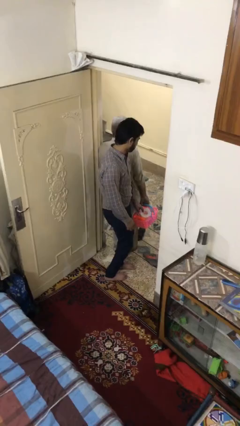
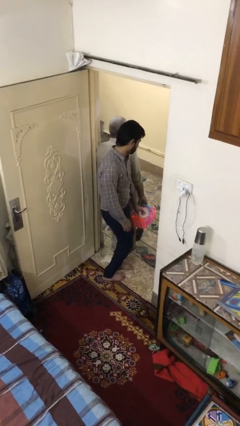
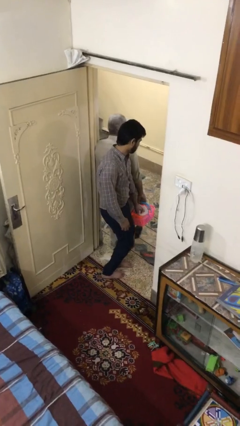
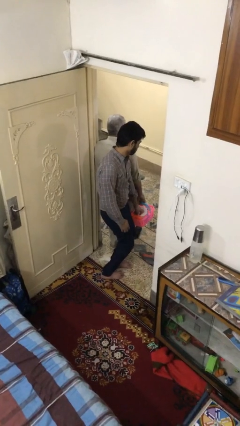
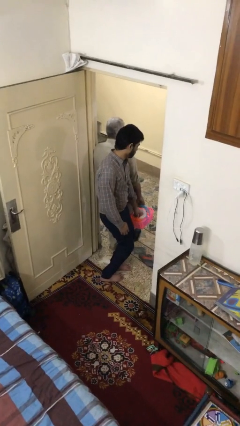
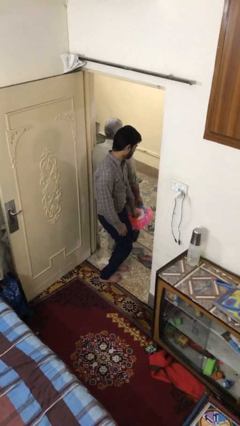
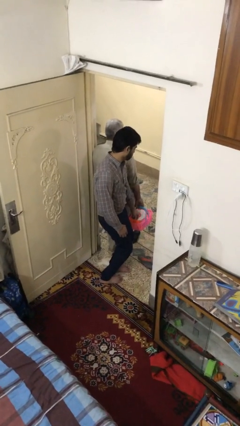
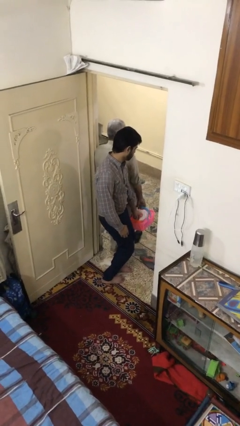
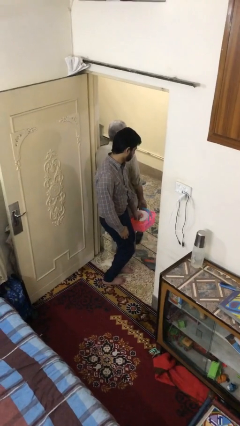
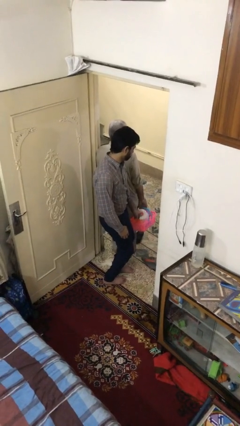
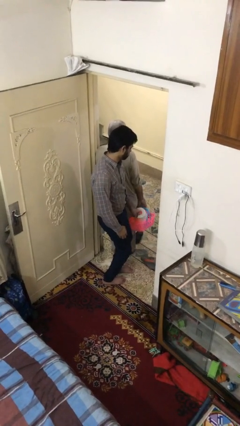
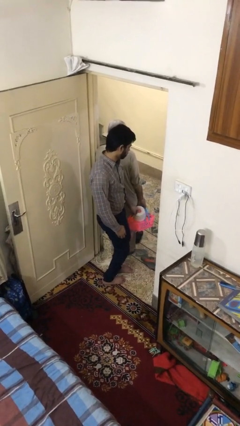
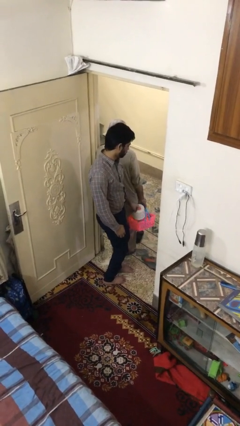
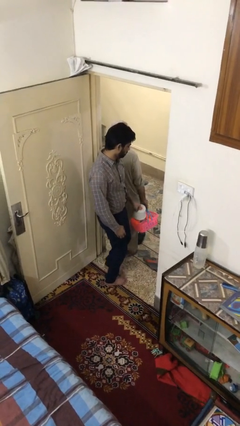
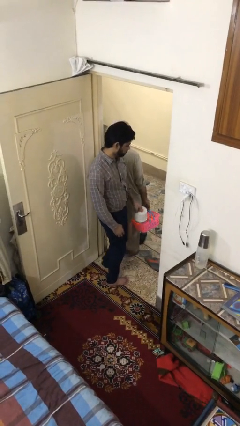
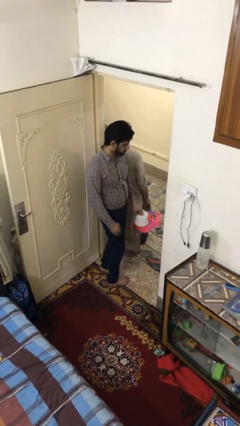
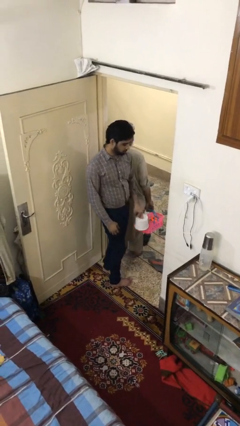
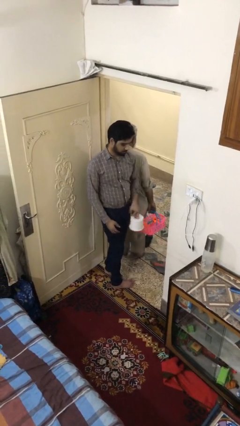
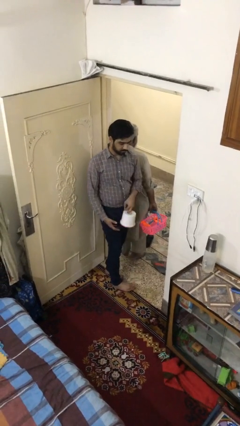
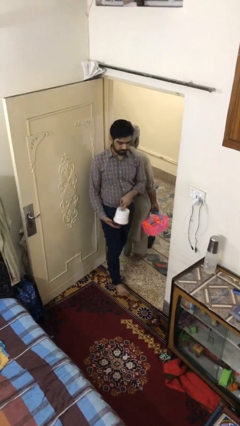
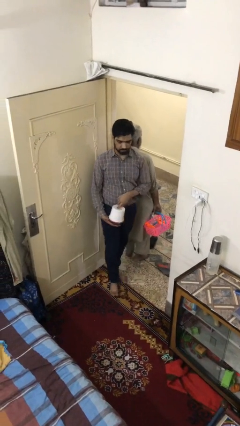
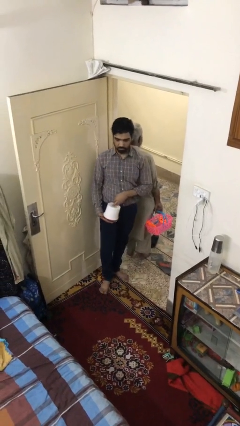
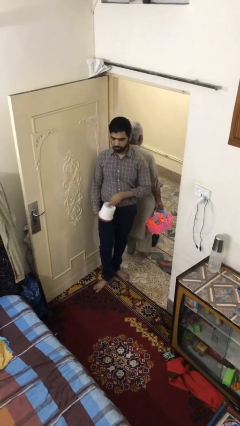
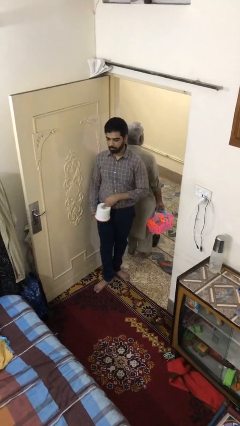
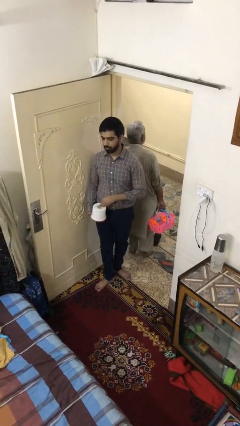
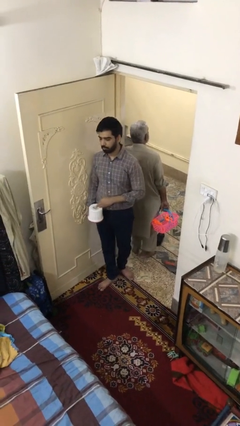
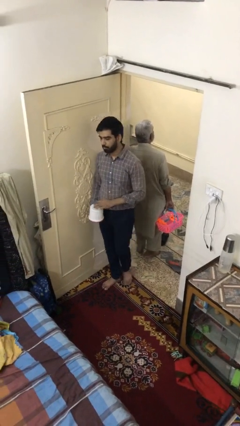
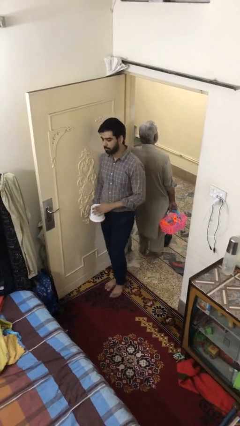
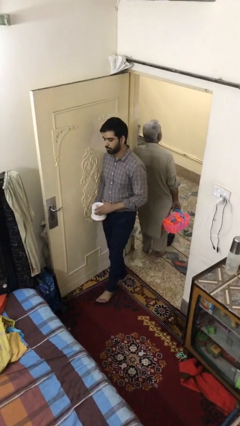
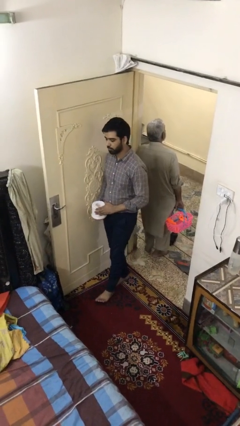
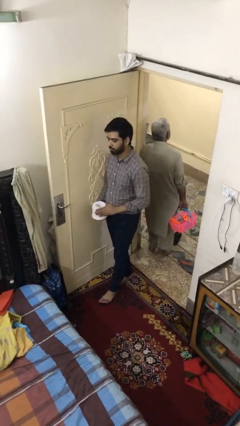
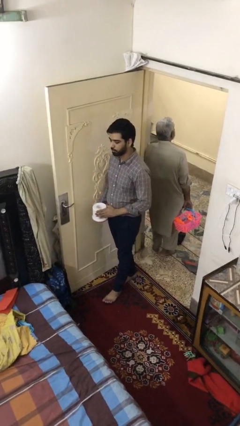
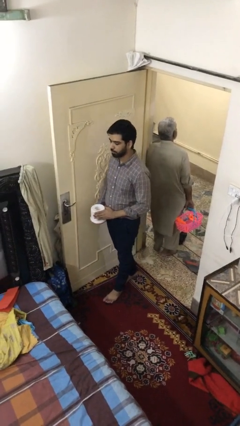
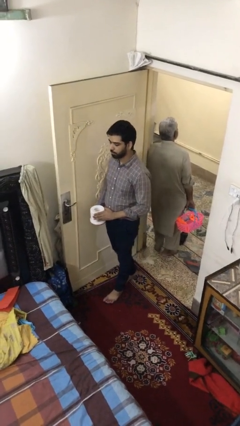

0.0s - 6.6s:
person steals object from person

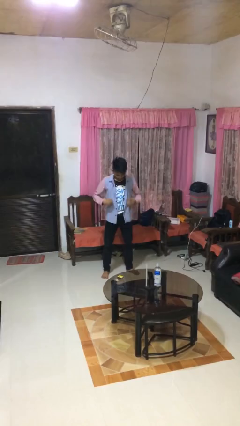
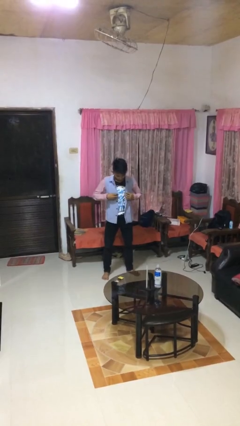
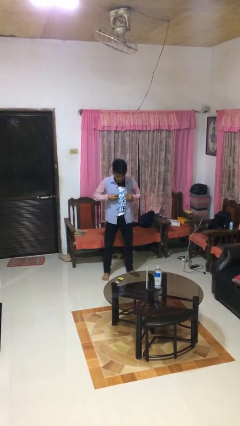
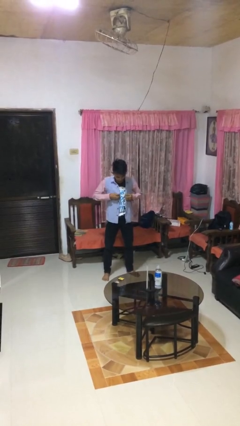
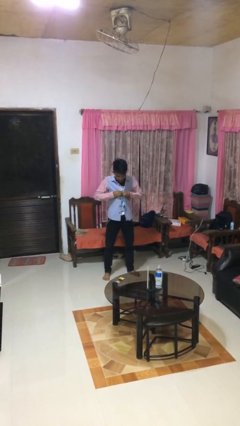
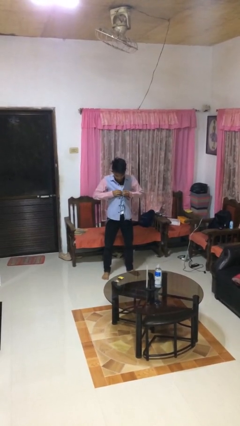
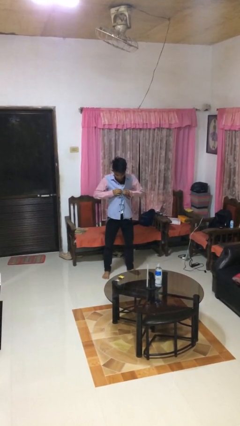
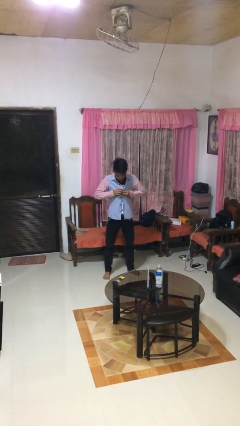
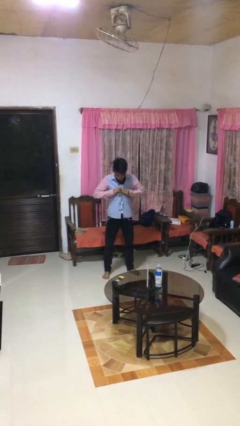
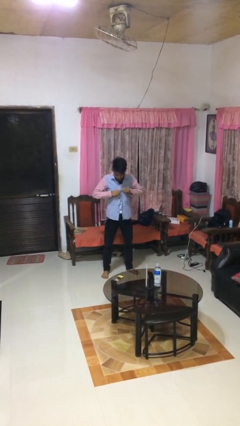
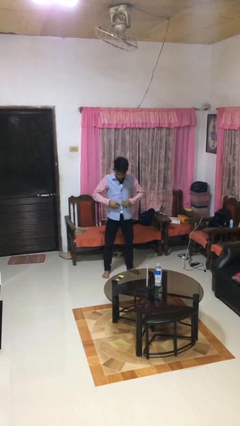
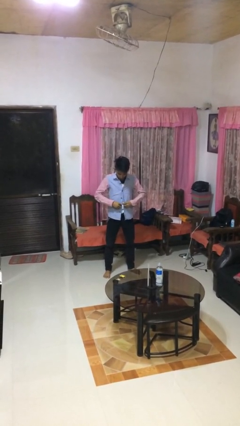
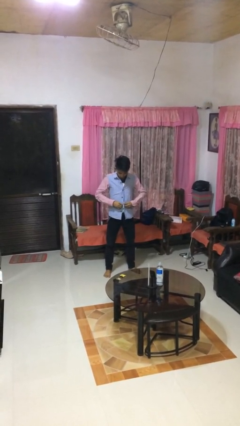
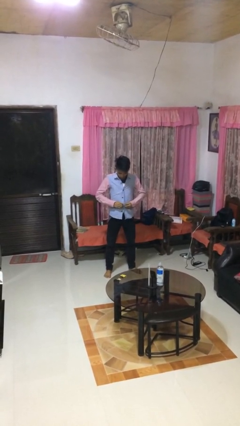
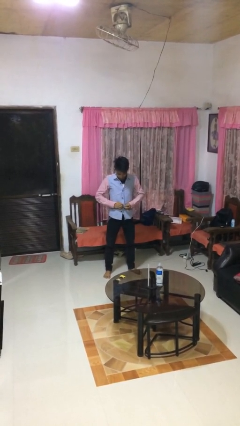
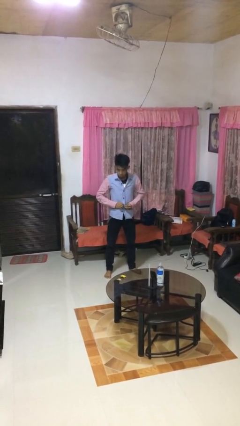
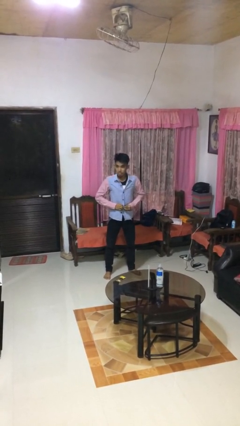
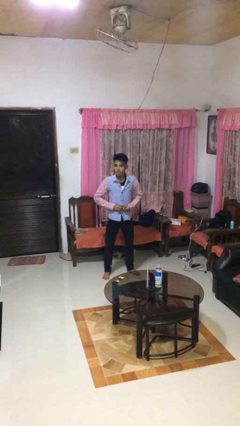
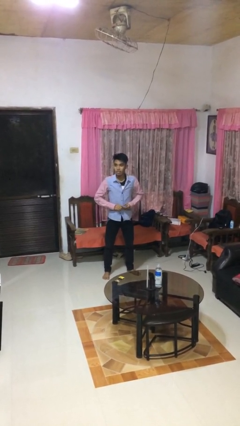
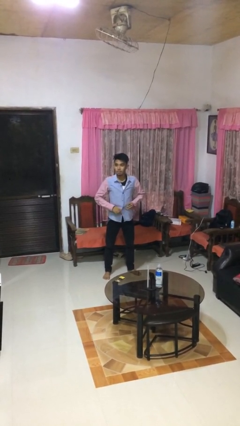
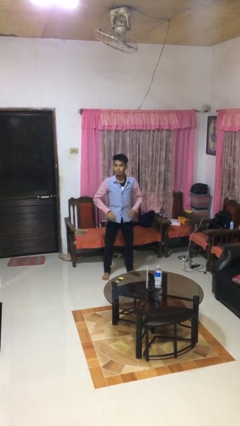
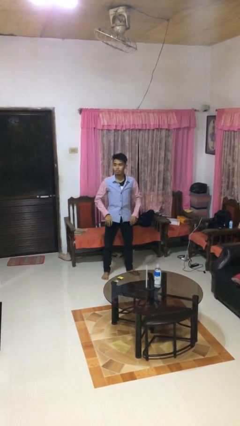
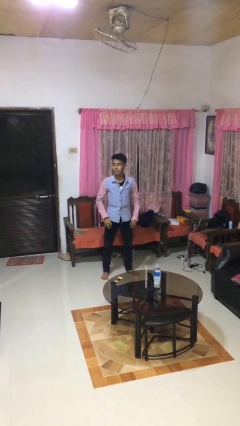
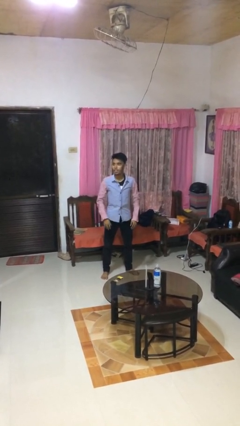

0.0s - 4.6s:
person buttons shirt

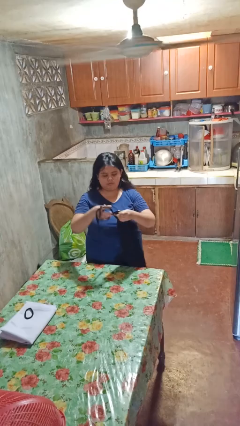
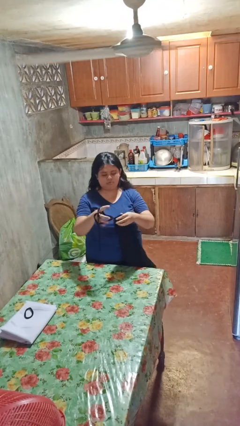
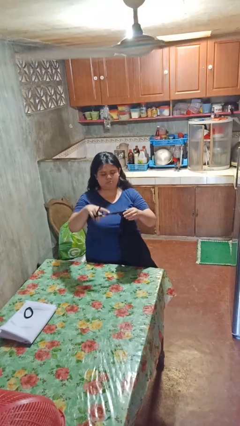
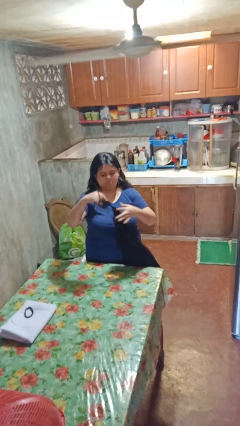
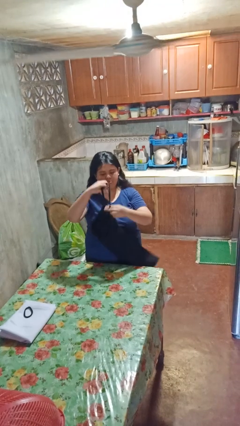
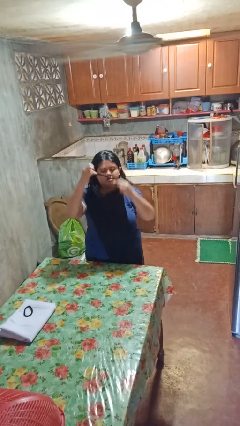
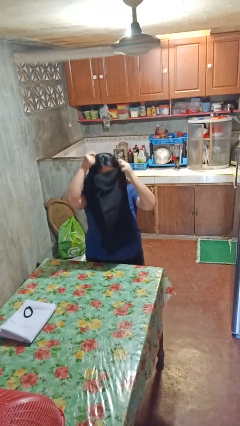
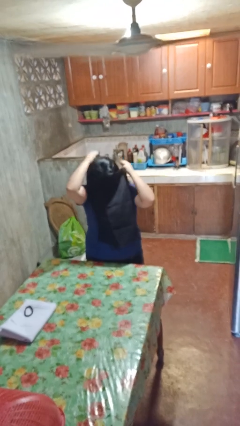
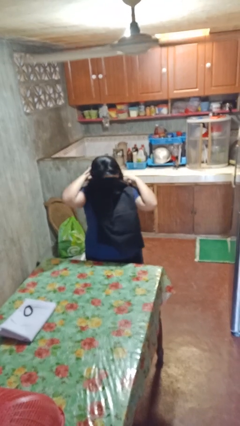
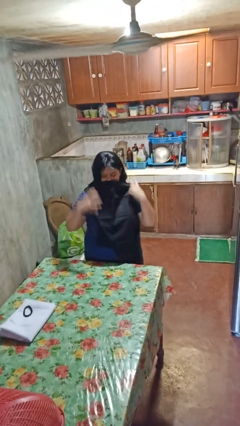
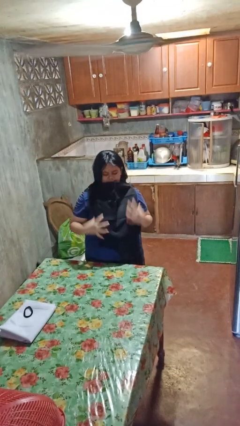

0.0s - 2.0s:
person puts on apron

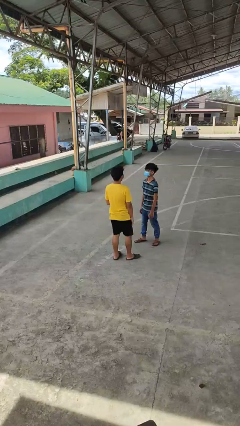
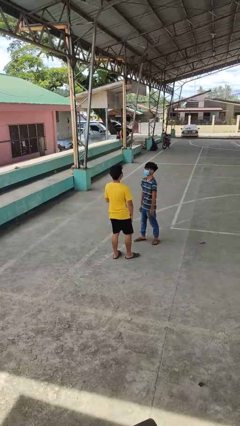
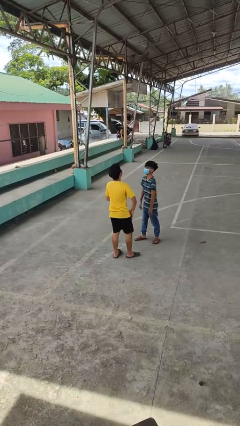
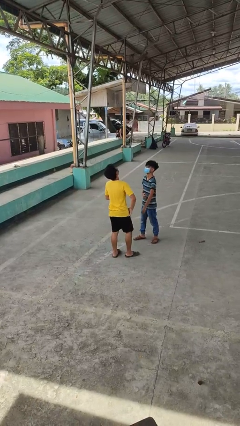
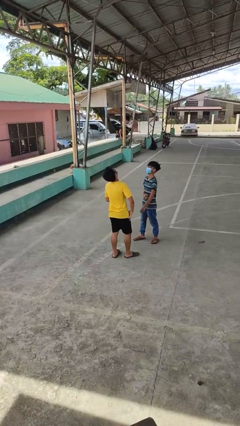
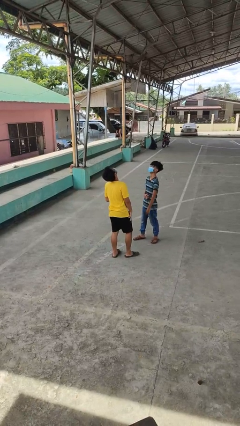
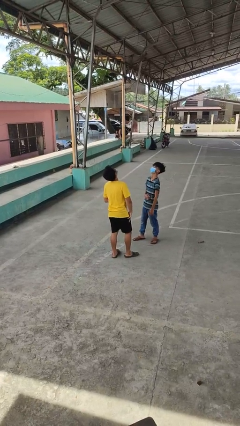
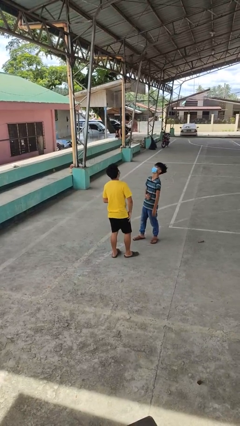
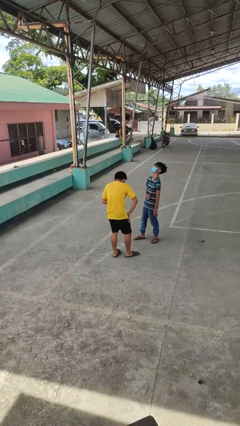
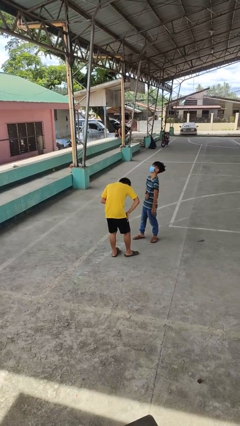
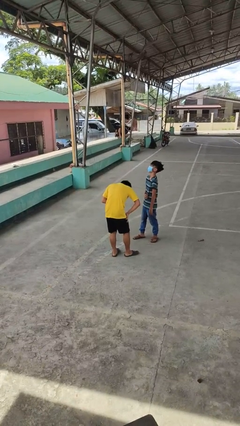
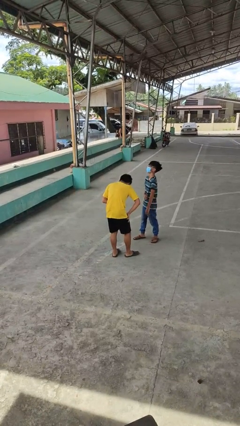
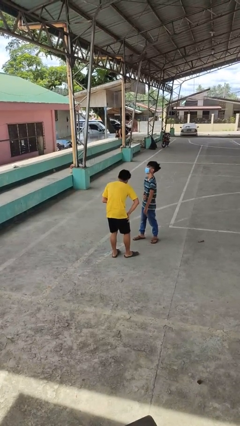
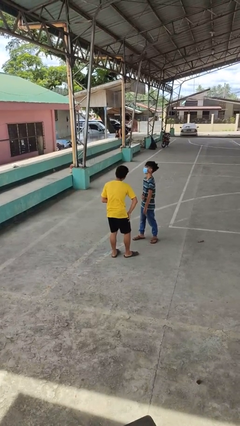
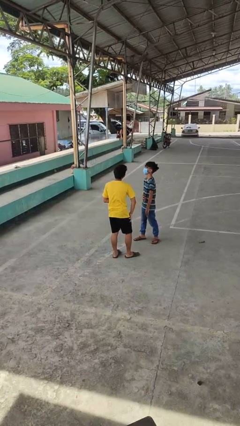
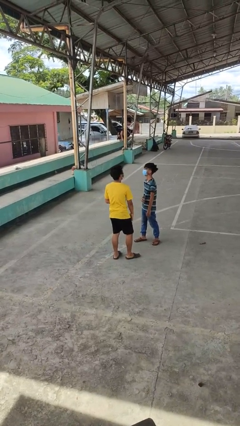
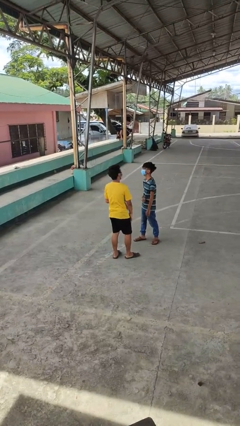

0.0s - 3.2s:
person laughs with person

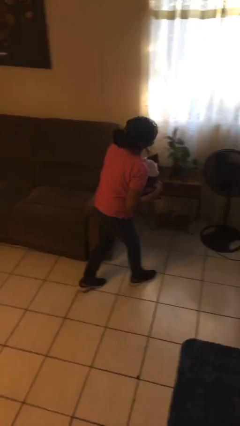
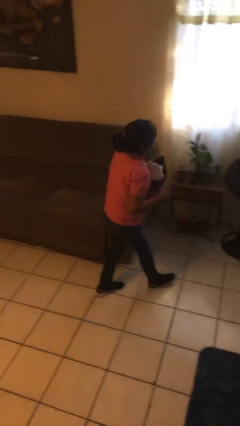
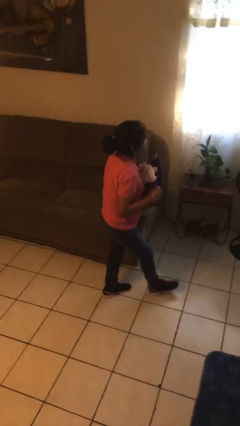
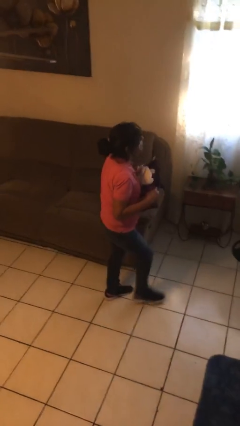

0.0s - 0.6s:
person picks up object from floor

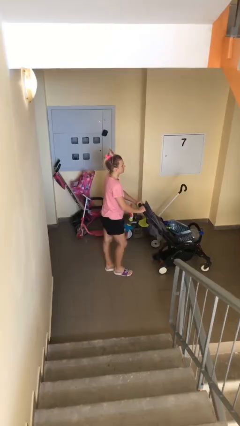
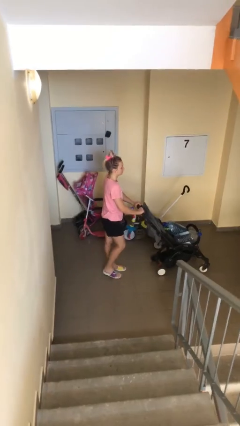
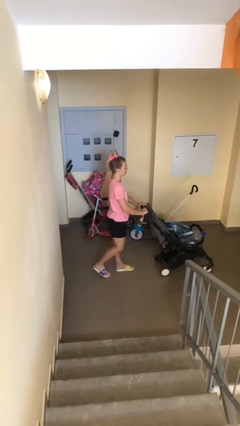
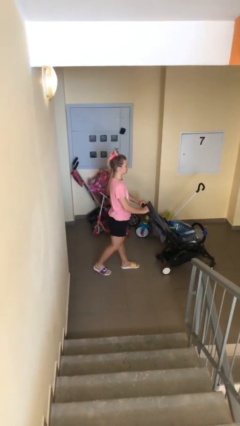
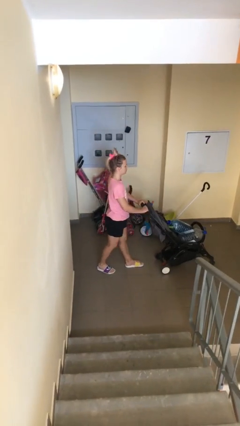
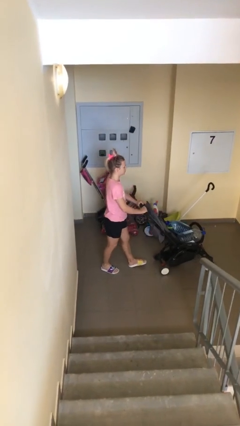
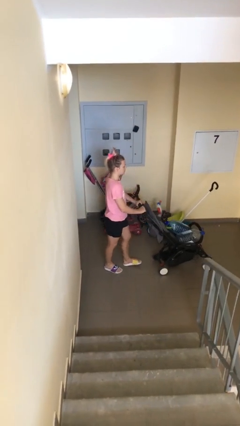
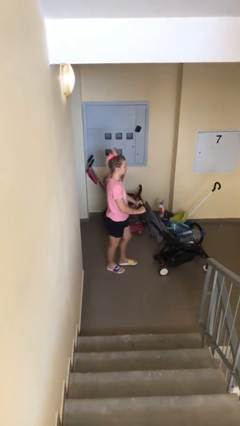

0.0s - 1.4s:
person pulls wheeled cart
